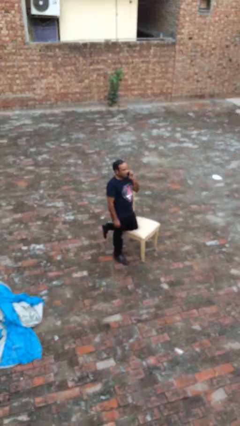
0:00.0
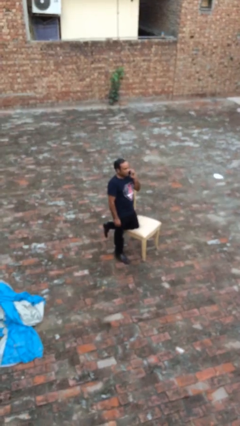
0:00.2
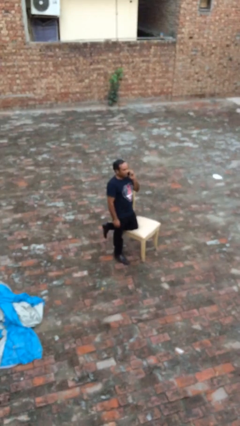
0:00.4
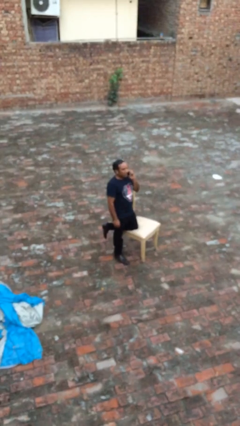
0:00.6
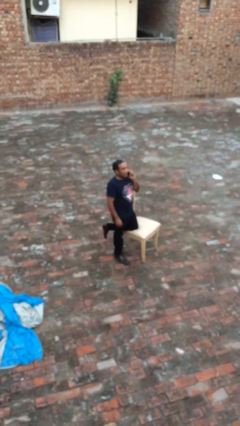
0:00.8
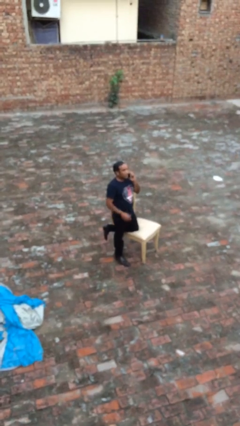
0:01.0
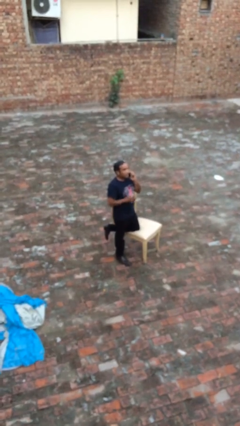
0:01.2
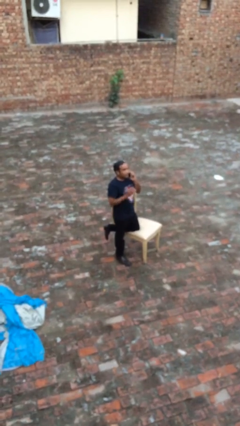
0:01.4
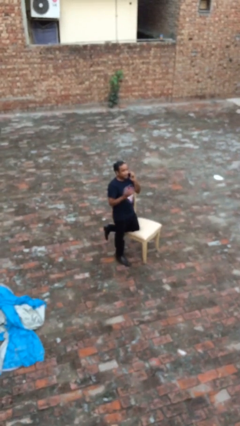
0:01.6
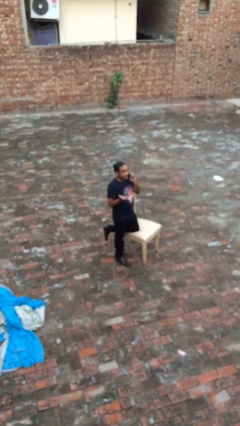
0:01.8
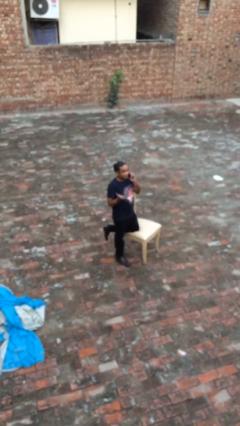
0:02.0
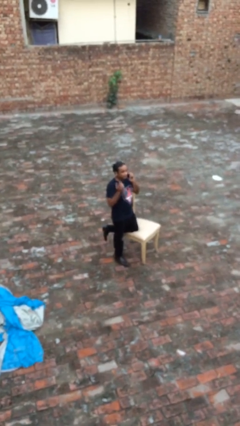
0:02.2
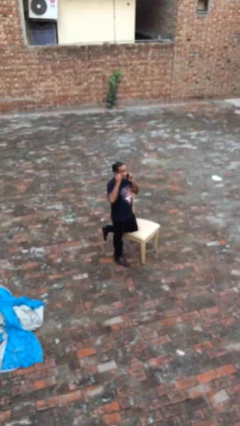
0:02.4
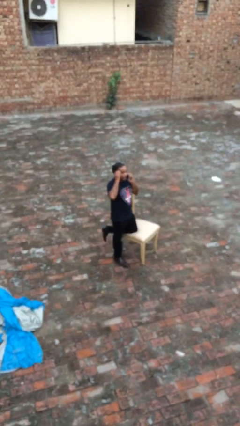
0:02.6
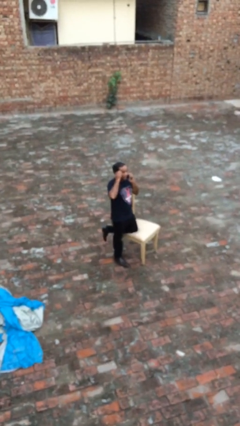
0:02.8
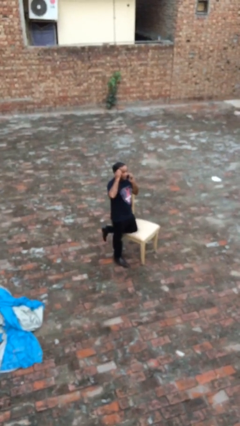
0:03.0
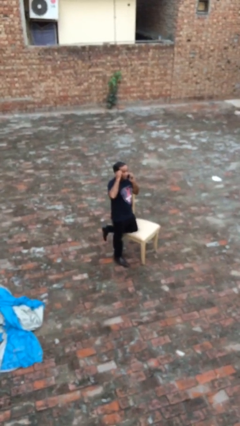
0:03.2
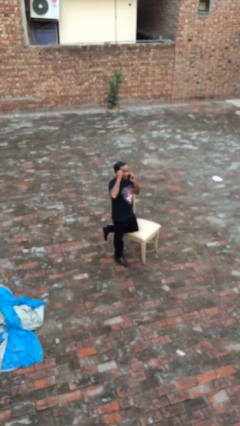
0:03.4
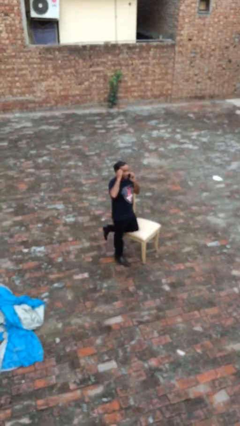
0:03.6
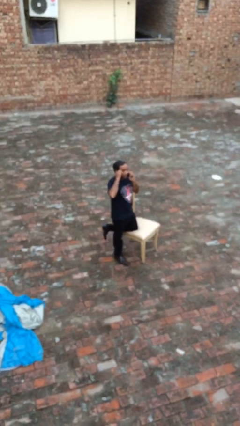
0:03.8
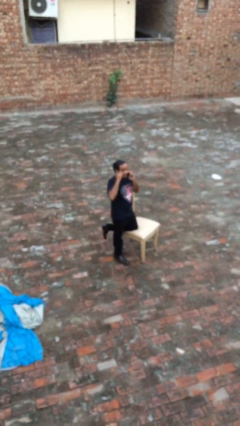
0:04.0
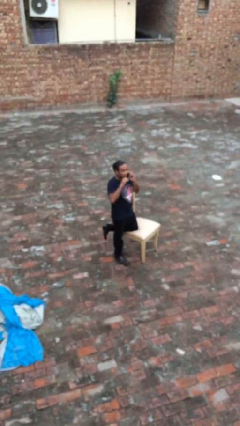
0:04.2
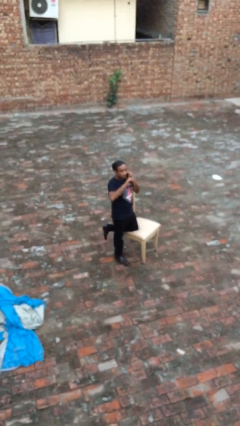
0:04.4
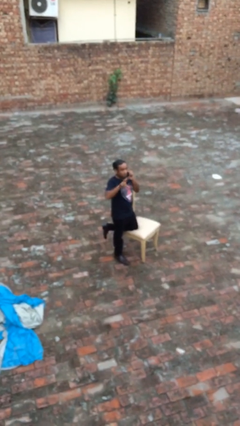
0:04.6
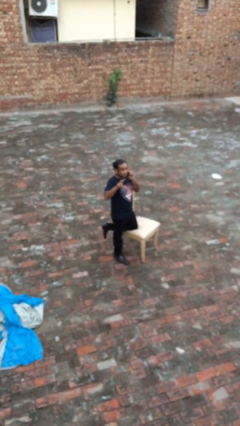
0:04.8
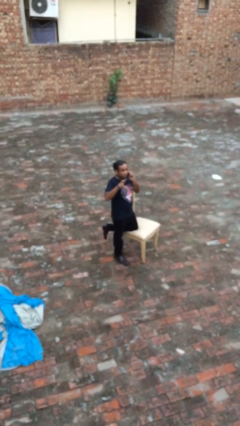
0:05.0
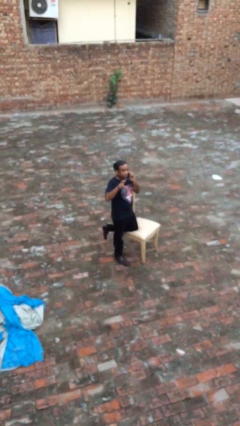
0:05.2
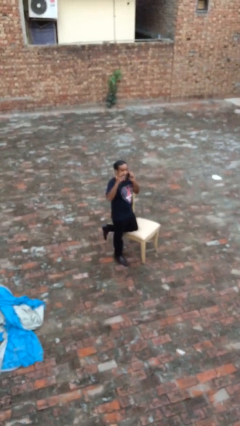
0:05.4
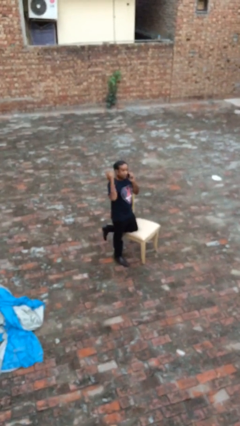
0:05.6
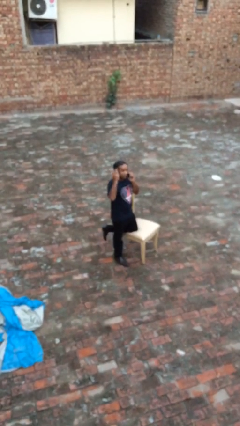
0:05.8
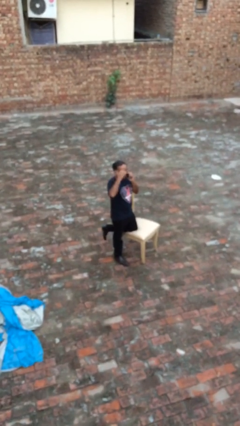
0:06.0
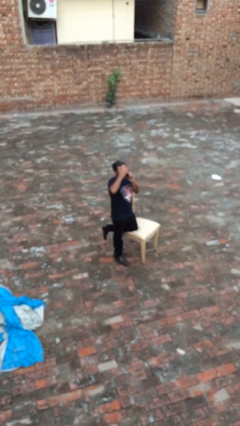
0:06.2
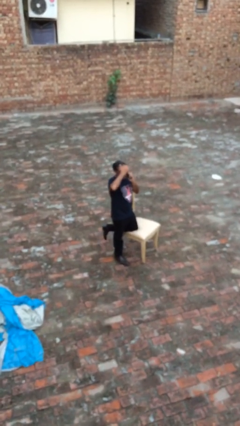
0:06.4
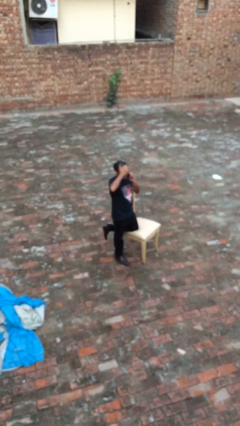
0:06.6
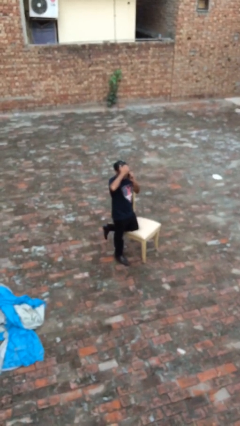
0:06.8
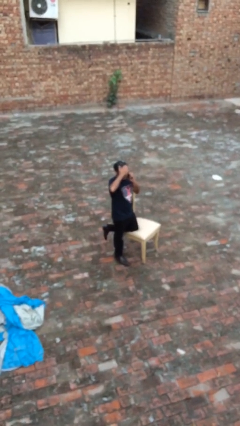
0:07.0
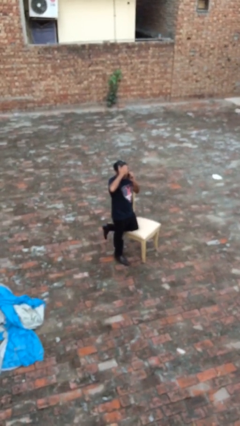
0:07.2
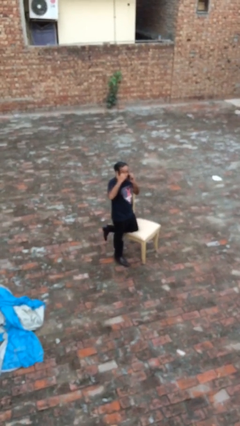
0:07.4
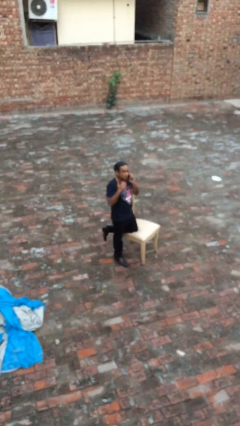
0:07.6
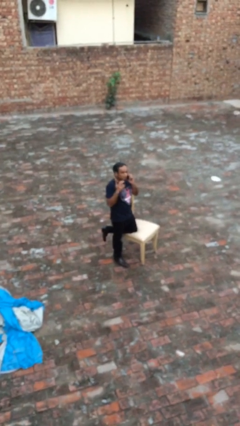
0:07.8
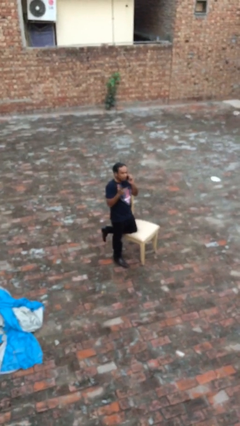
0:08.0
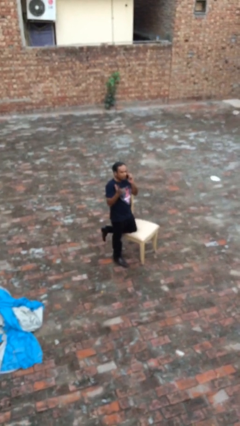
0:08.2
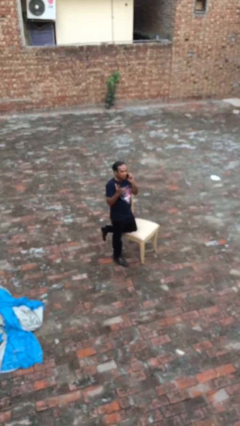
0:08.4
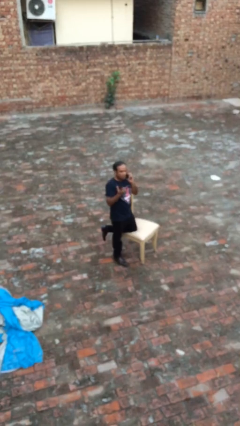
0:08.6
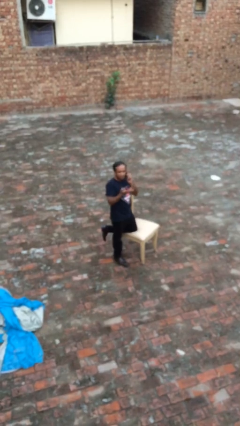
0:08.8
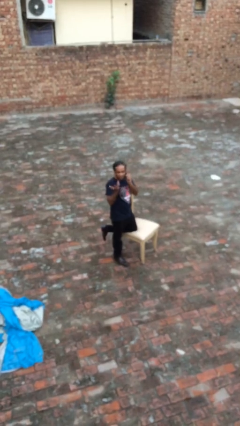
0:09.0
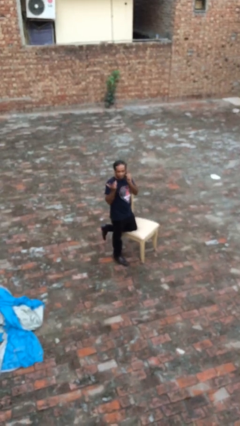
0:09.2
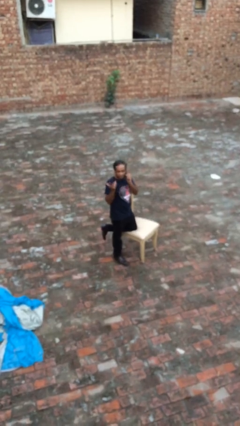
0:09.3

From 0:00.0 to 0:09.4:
person talks on phone

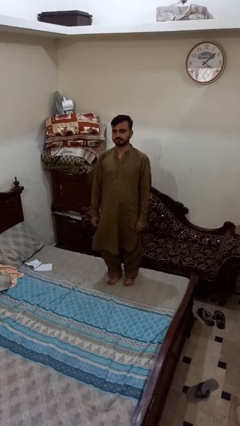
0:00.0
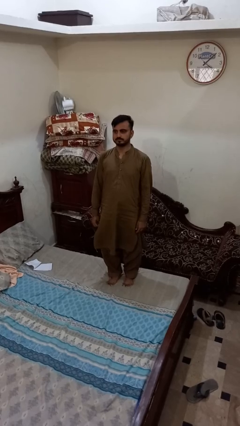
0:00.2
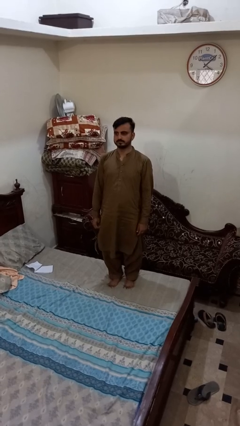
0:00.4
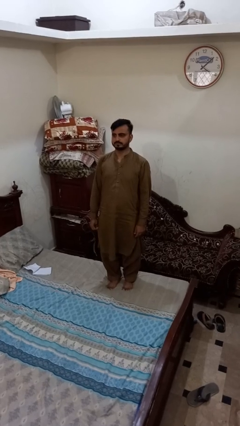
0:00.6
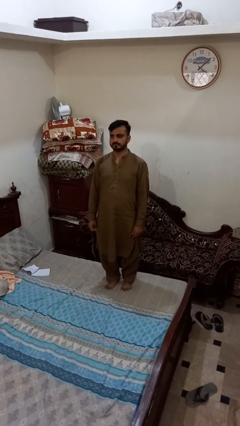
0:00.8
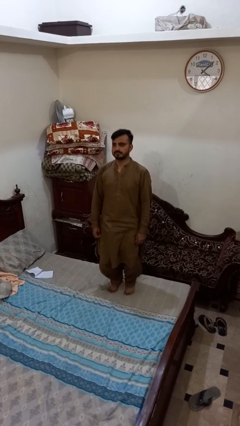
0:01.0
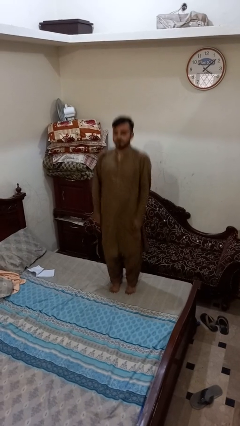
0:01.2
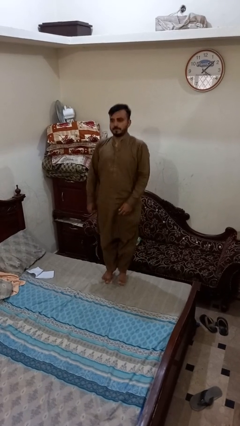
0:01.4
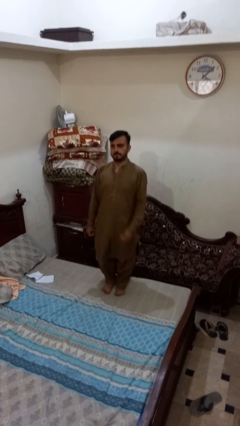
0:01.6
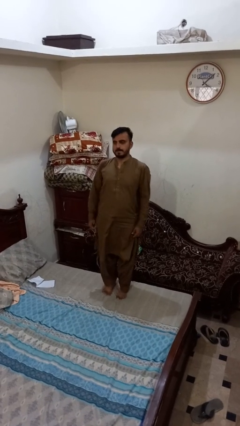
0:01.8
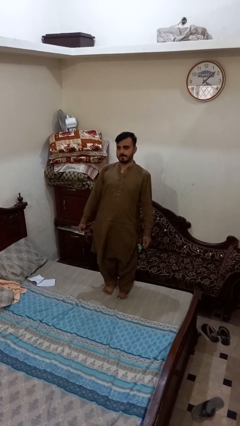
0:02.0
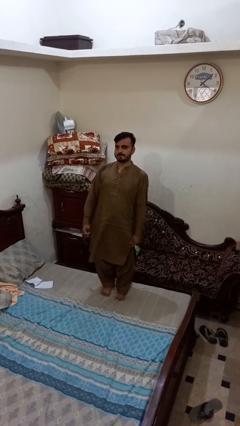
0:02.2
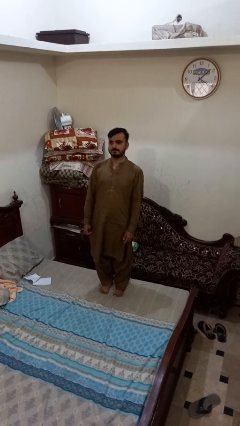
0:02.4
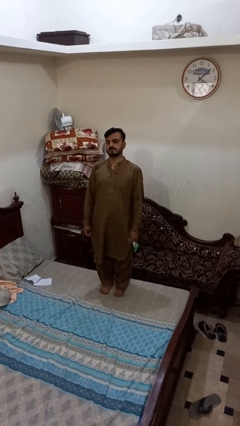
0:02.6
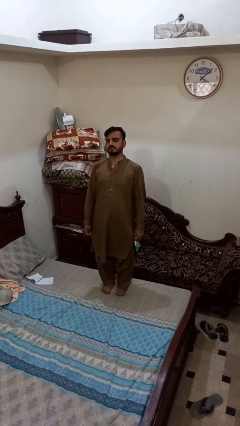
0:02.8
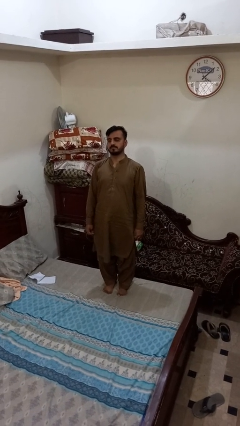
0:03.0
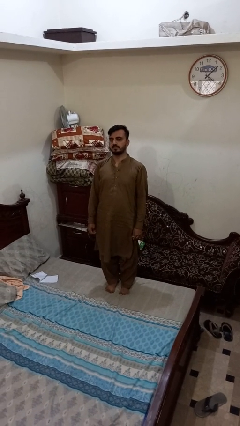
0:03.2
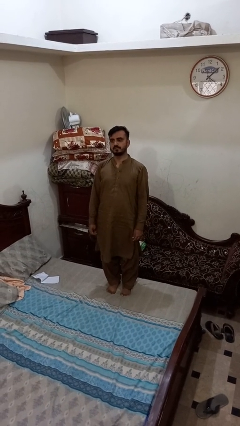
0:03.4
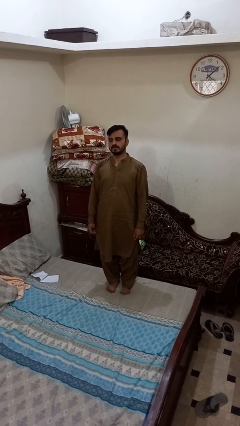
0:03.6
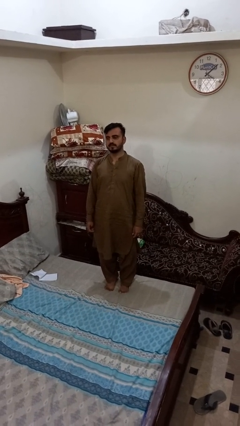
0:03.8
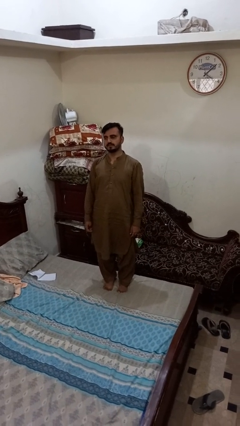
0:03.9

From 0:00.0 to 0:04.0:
person jumps on bed

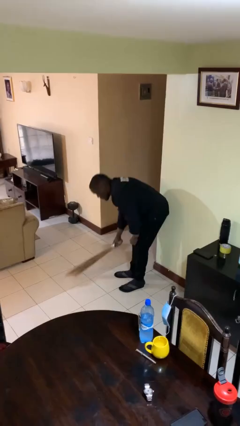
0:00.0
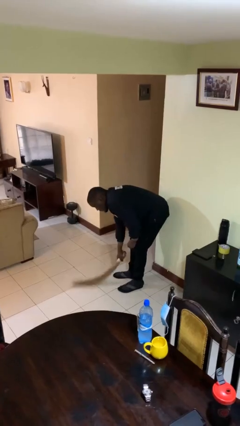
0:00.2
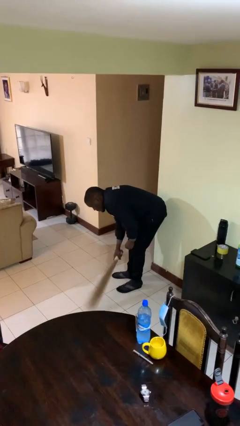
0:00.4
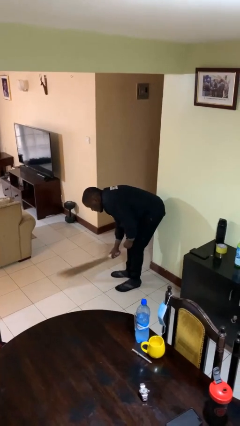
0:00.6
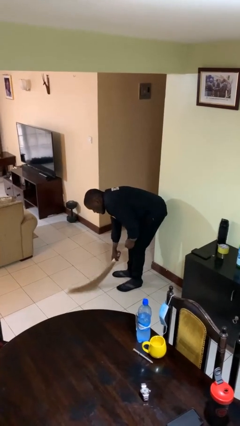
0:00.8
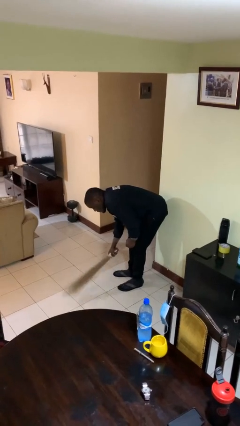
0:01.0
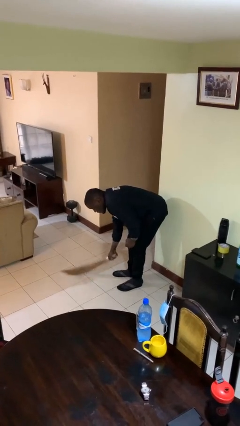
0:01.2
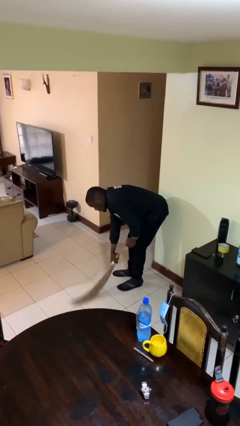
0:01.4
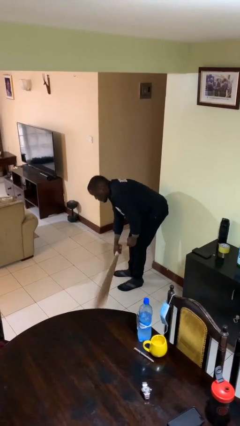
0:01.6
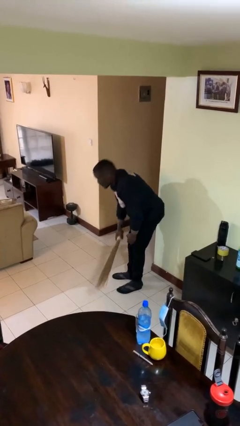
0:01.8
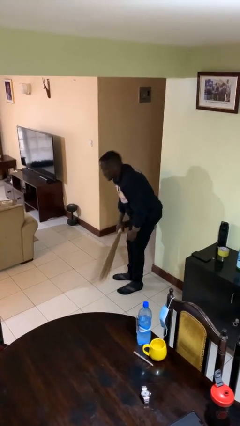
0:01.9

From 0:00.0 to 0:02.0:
person sweeps floor

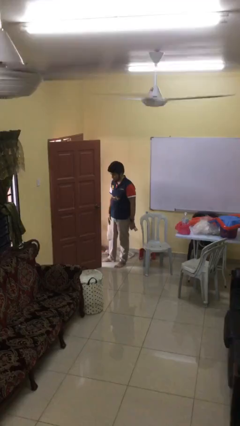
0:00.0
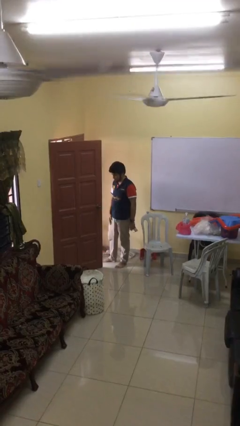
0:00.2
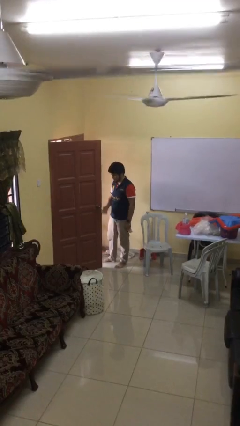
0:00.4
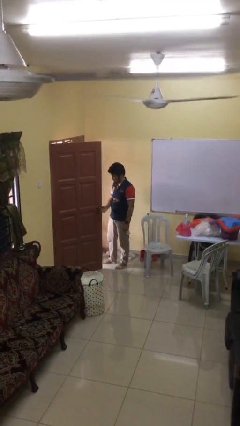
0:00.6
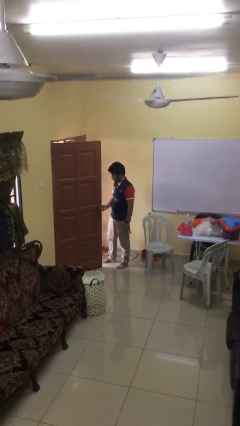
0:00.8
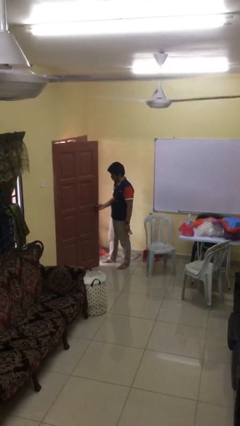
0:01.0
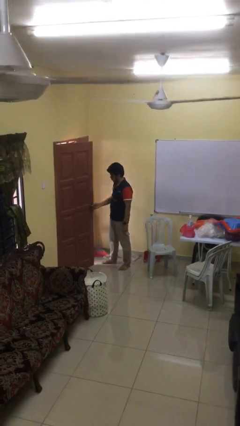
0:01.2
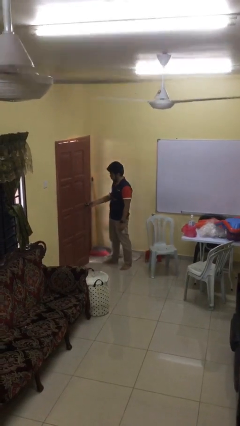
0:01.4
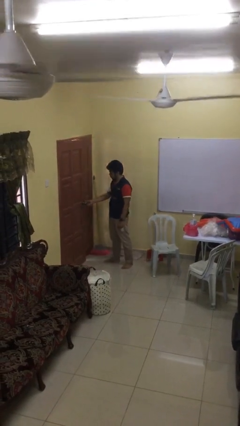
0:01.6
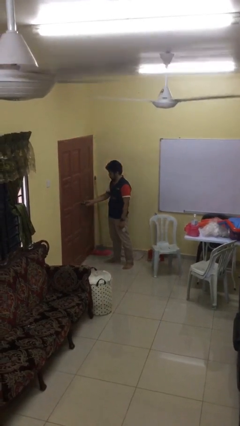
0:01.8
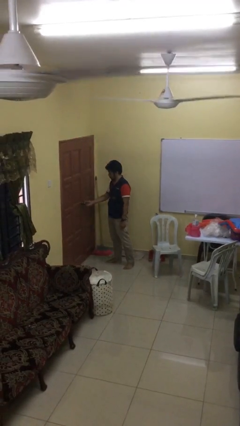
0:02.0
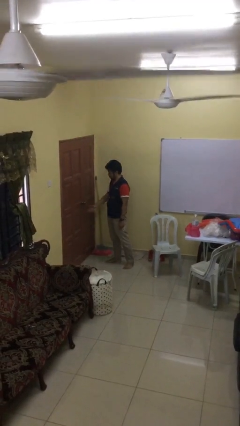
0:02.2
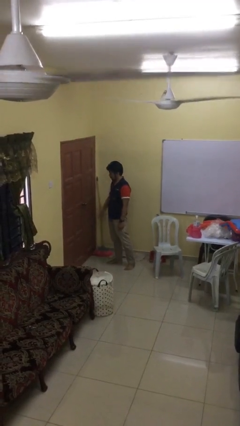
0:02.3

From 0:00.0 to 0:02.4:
person closes facility door

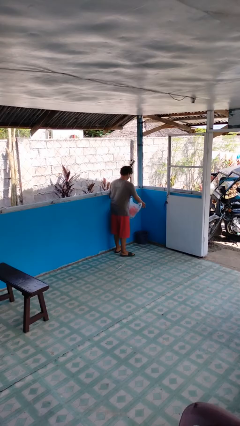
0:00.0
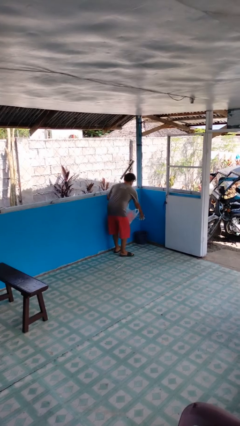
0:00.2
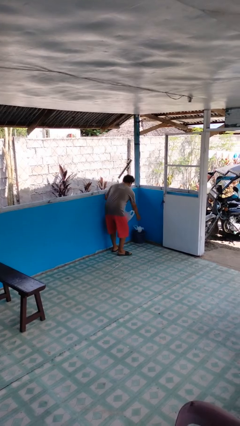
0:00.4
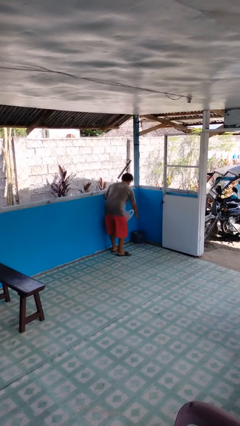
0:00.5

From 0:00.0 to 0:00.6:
person discards trash
